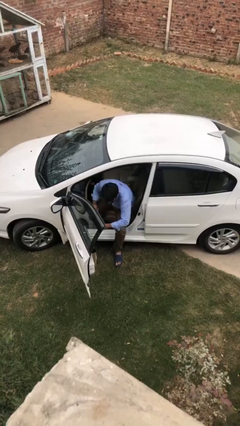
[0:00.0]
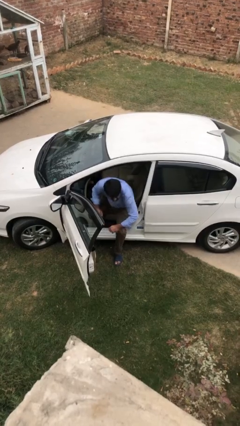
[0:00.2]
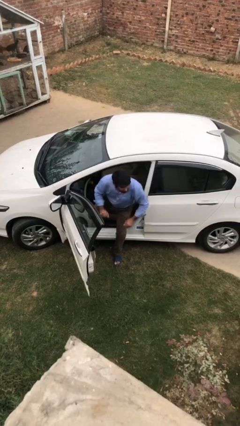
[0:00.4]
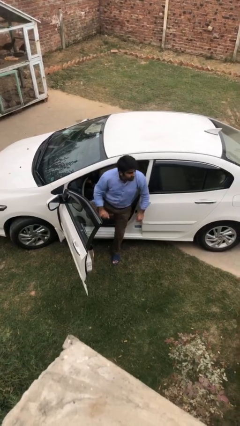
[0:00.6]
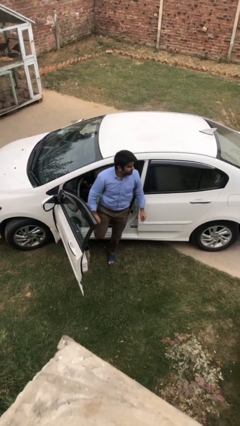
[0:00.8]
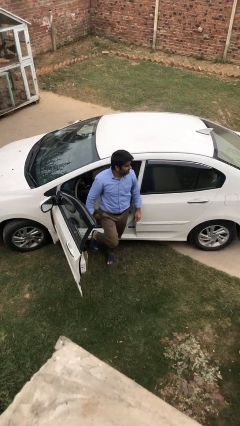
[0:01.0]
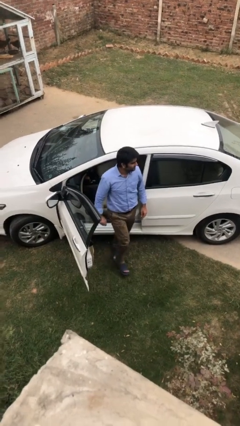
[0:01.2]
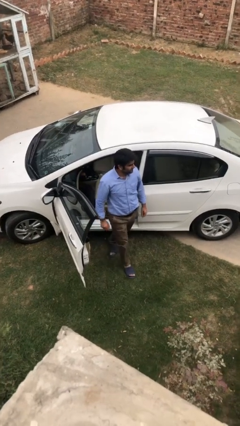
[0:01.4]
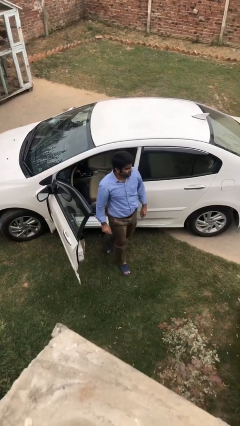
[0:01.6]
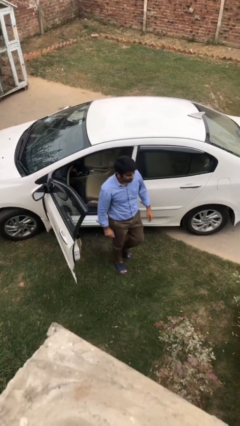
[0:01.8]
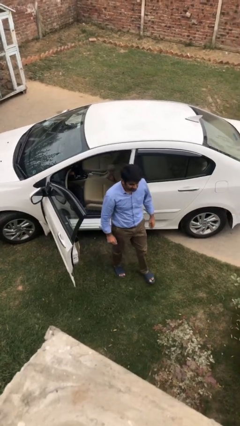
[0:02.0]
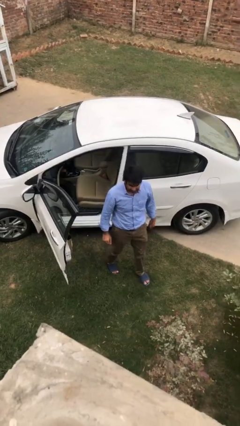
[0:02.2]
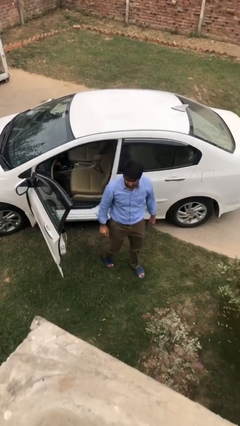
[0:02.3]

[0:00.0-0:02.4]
person exits car

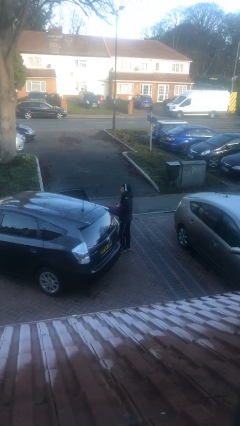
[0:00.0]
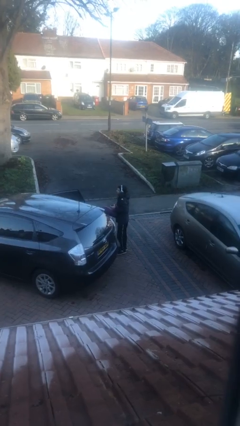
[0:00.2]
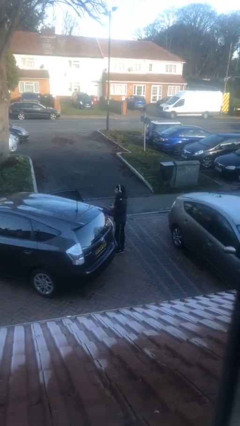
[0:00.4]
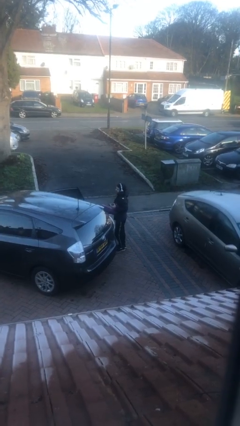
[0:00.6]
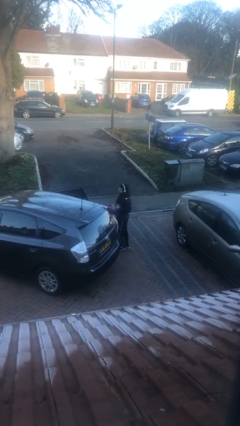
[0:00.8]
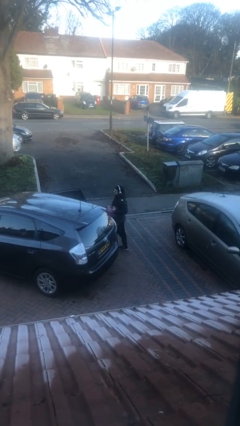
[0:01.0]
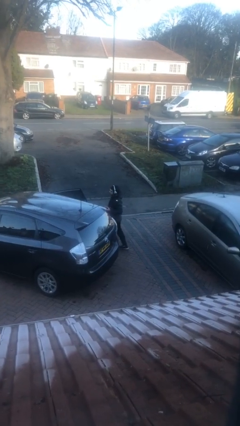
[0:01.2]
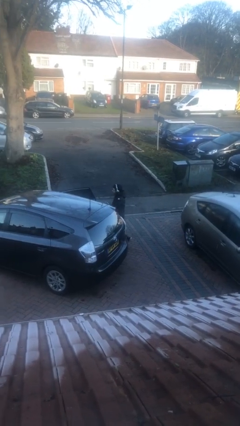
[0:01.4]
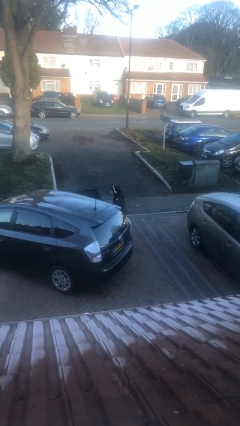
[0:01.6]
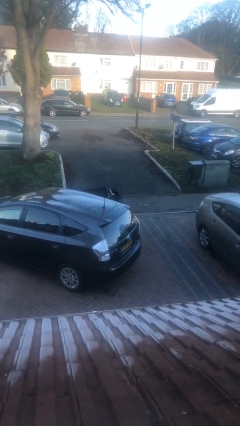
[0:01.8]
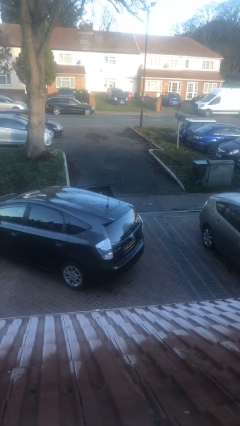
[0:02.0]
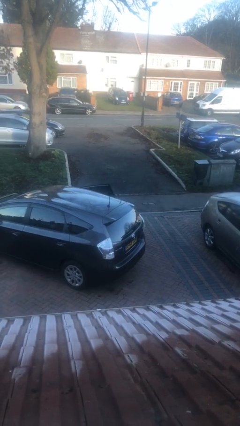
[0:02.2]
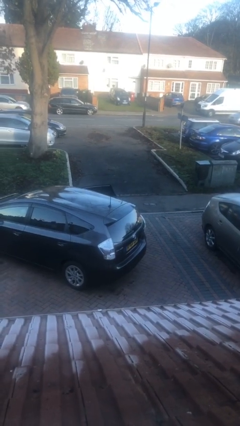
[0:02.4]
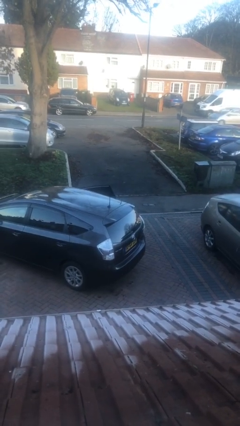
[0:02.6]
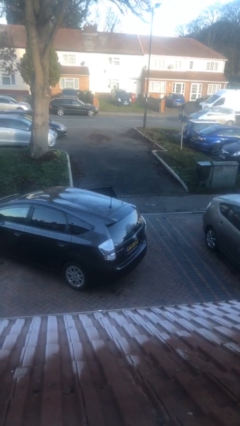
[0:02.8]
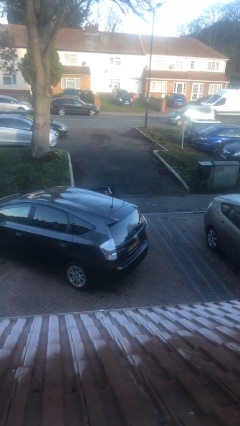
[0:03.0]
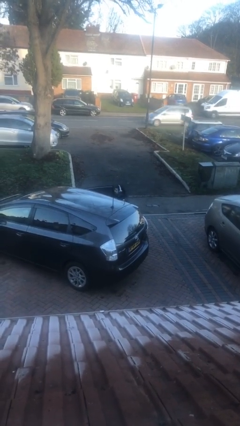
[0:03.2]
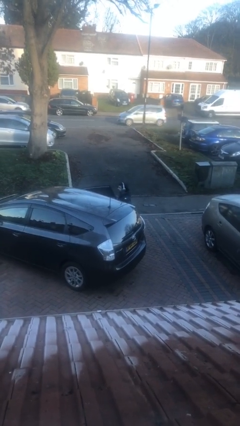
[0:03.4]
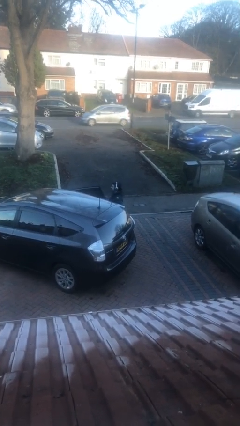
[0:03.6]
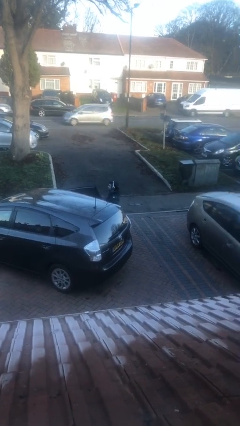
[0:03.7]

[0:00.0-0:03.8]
person loads car

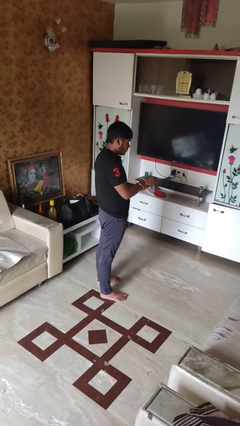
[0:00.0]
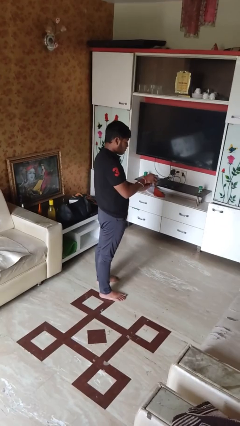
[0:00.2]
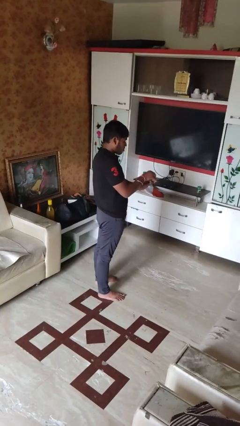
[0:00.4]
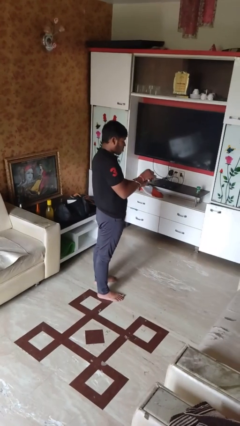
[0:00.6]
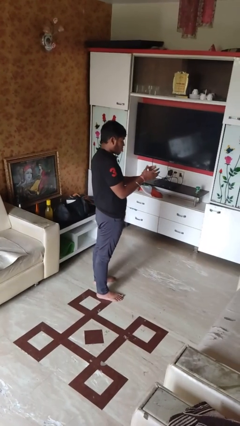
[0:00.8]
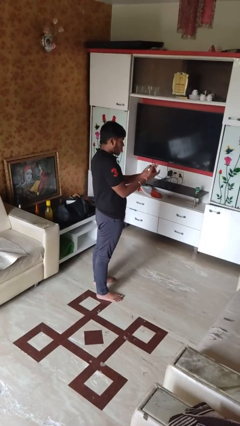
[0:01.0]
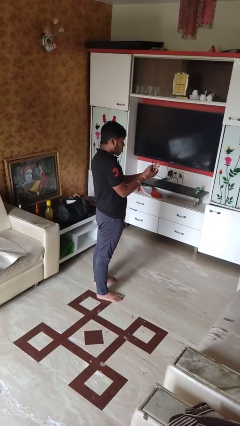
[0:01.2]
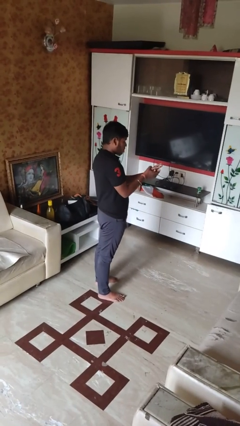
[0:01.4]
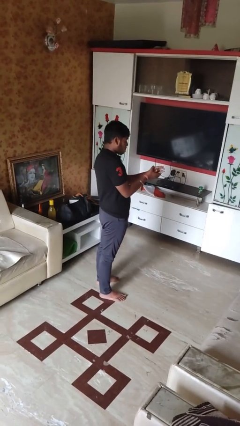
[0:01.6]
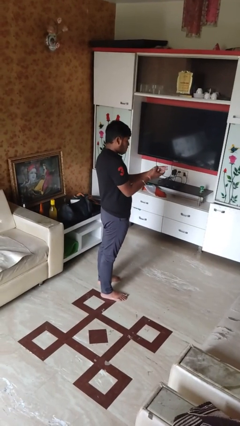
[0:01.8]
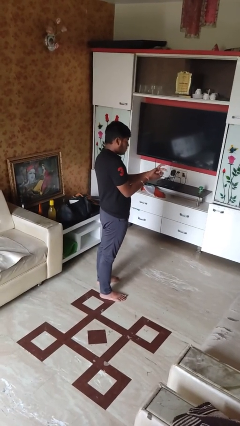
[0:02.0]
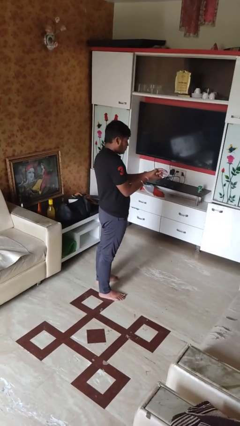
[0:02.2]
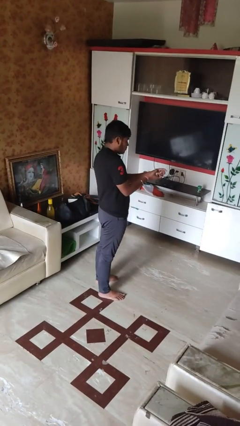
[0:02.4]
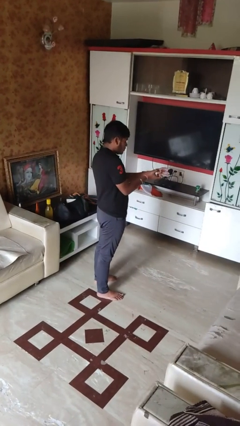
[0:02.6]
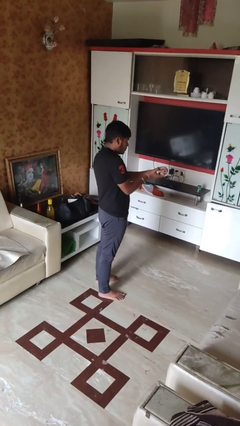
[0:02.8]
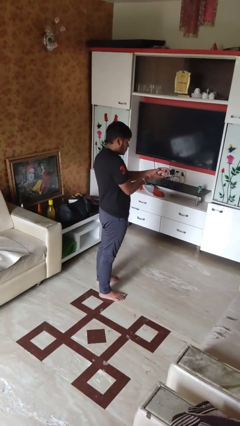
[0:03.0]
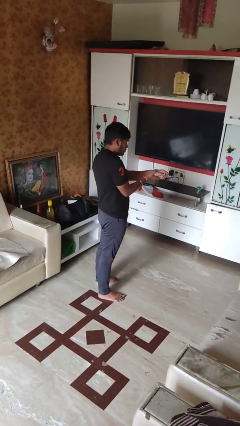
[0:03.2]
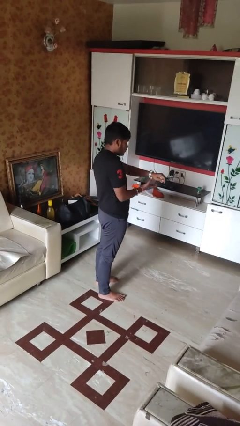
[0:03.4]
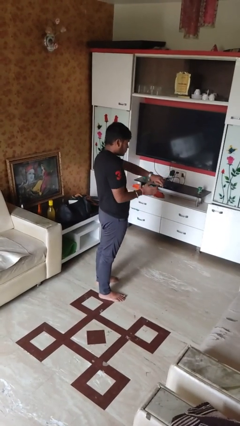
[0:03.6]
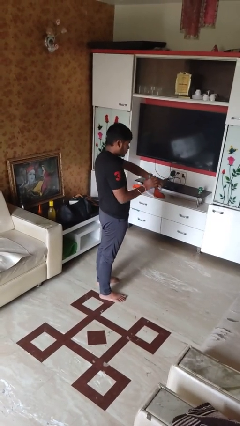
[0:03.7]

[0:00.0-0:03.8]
person puts on wristwatch

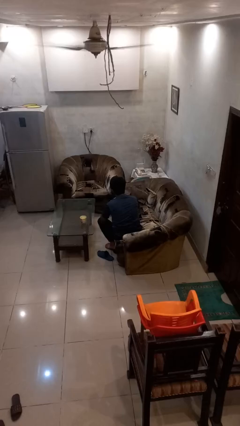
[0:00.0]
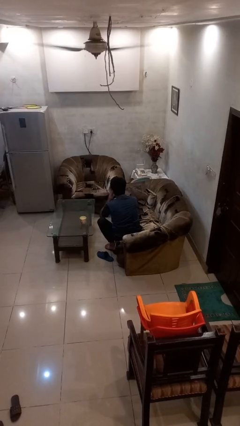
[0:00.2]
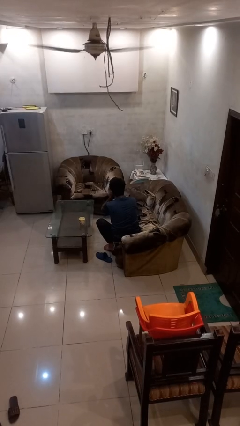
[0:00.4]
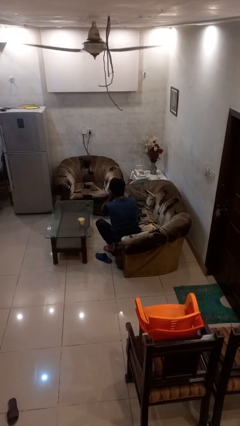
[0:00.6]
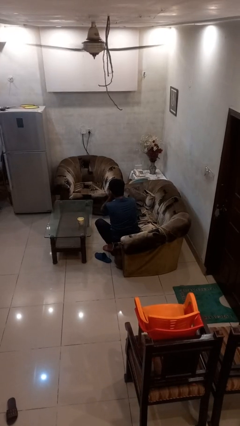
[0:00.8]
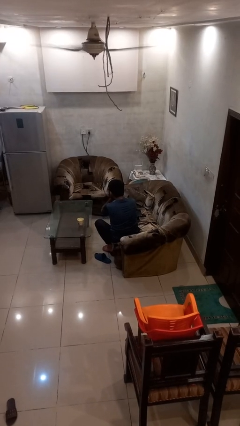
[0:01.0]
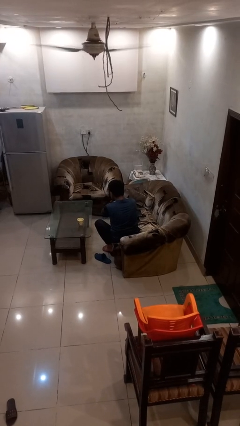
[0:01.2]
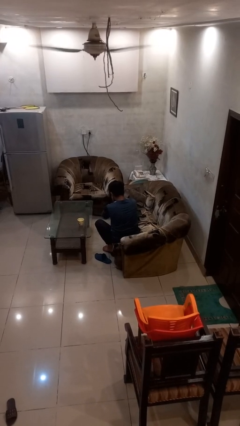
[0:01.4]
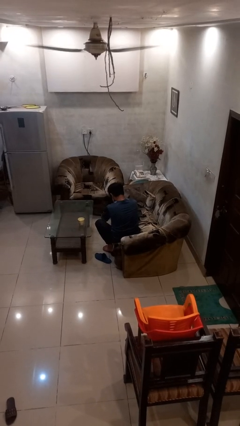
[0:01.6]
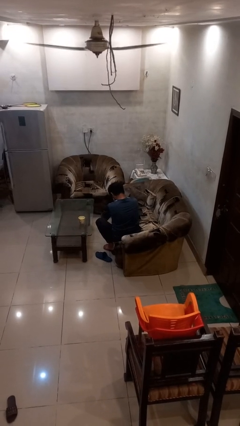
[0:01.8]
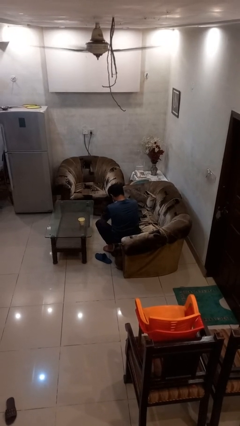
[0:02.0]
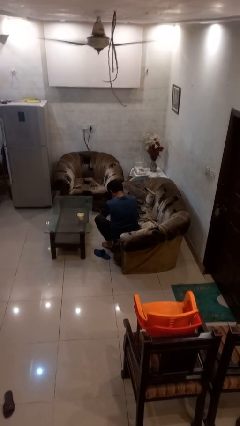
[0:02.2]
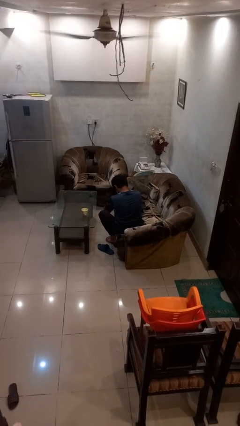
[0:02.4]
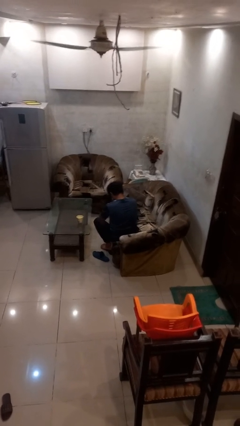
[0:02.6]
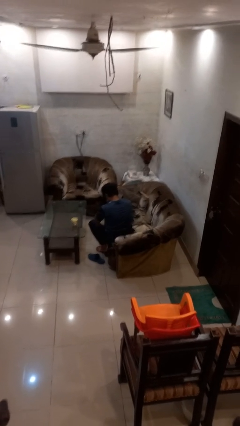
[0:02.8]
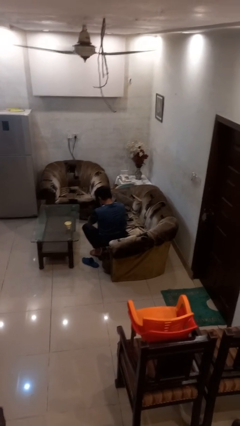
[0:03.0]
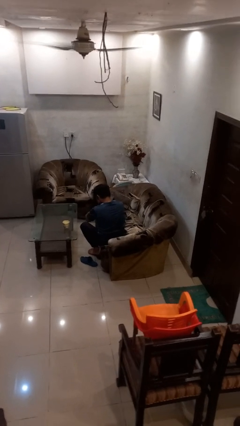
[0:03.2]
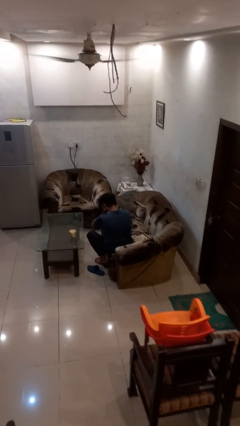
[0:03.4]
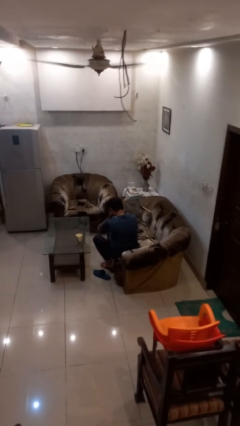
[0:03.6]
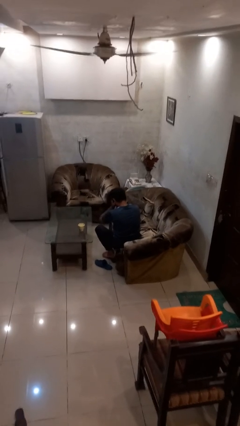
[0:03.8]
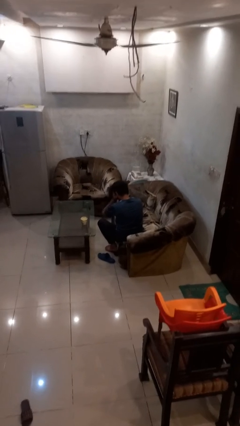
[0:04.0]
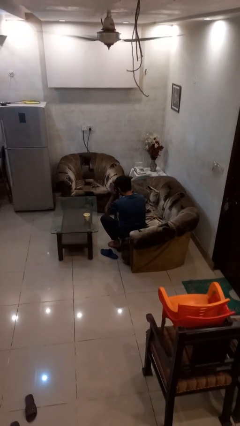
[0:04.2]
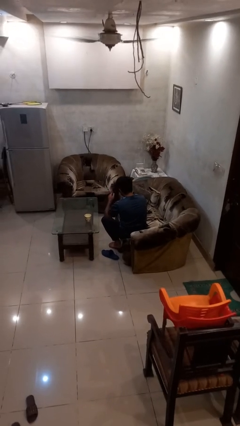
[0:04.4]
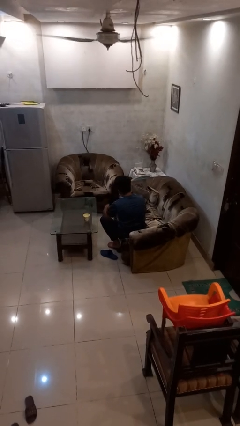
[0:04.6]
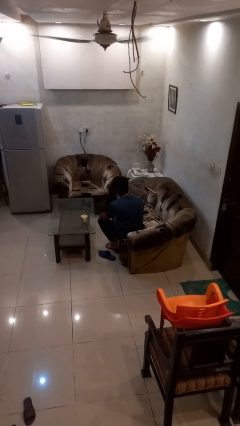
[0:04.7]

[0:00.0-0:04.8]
person covers face with hands

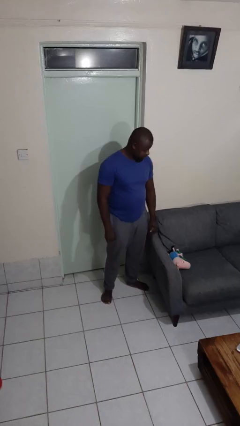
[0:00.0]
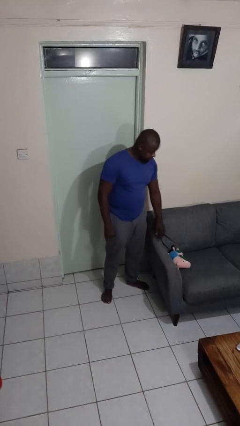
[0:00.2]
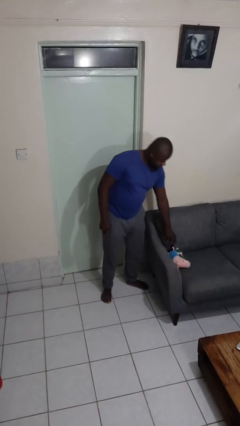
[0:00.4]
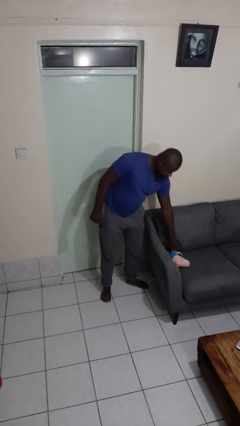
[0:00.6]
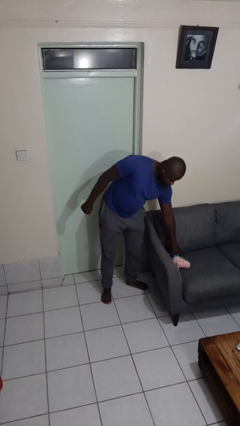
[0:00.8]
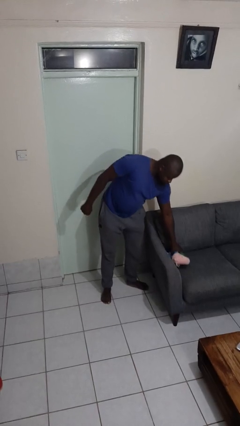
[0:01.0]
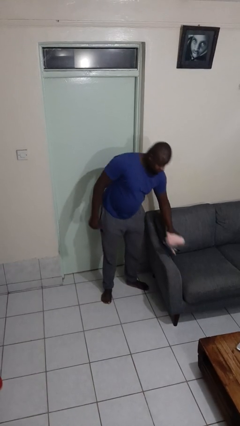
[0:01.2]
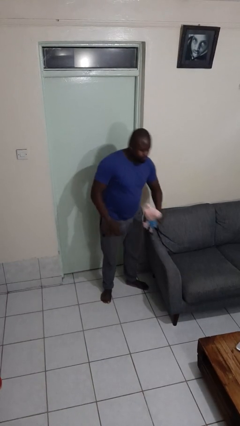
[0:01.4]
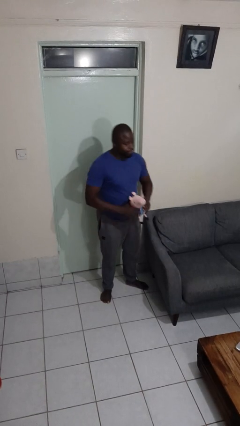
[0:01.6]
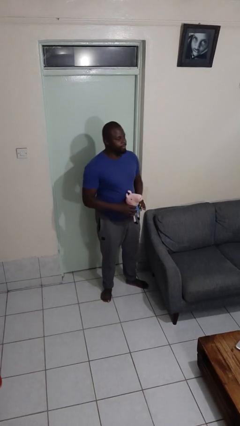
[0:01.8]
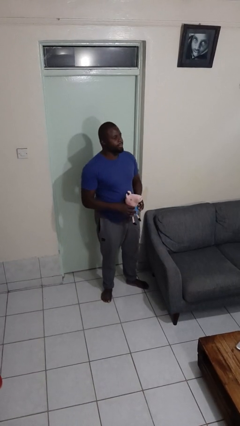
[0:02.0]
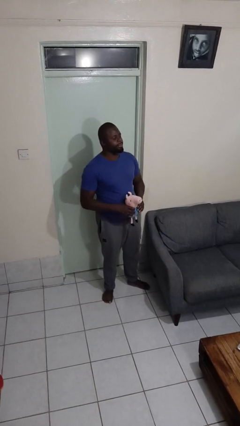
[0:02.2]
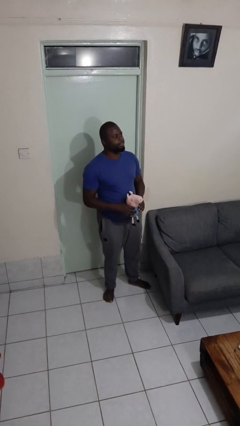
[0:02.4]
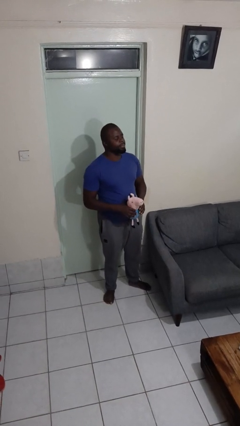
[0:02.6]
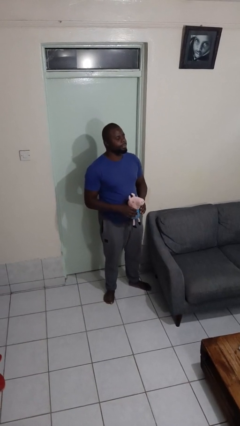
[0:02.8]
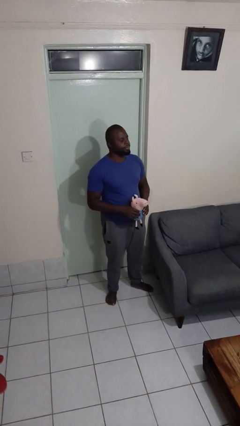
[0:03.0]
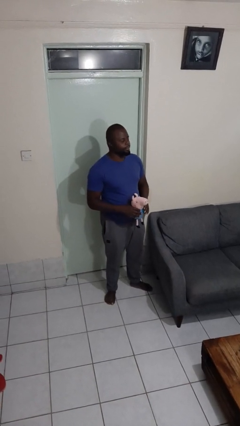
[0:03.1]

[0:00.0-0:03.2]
person picks up object from couch
